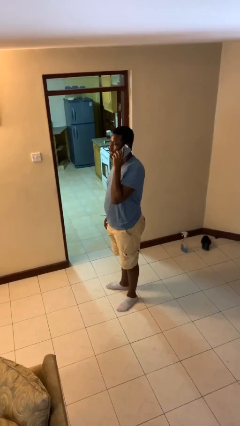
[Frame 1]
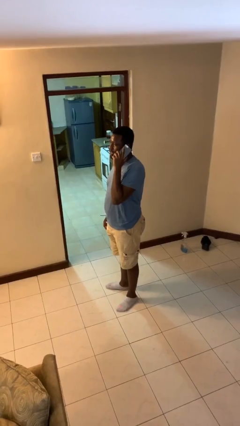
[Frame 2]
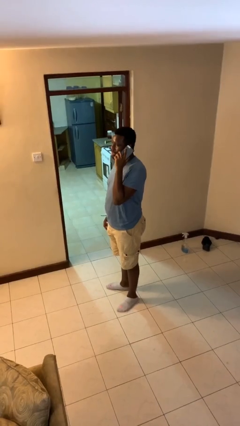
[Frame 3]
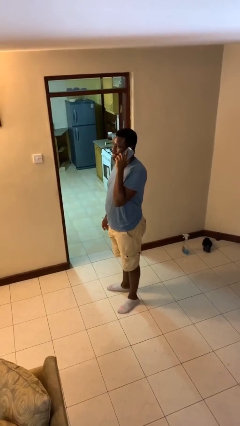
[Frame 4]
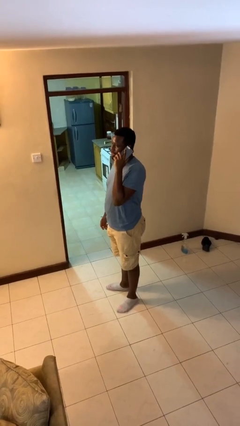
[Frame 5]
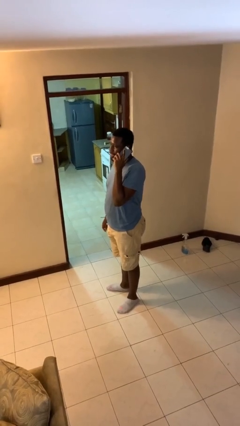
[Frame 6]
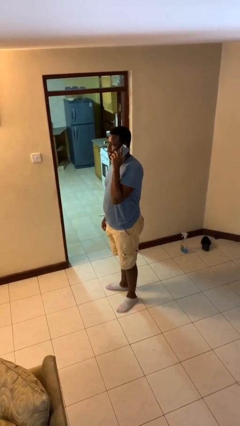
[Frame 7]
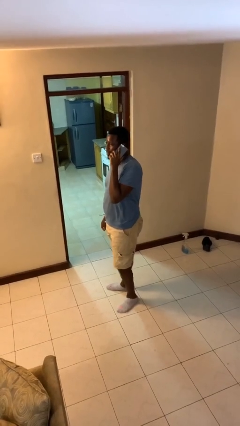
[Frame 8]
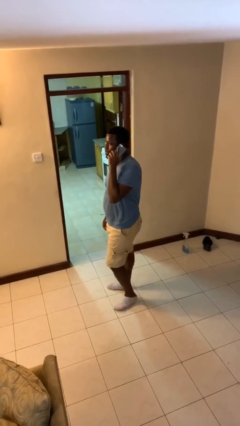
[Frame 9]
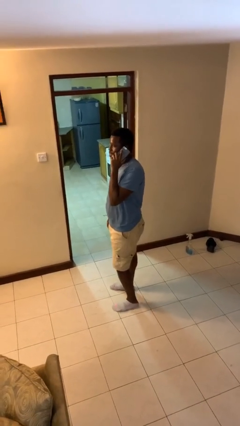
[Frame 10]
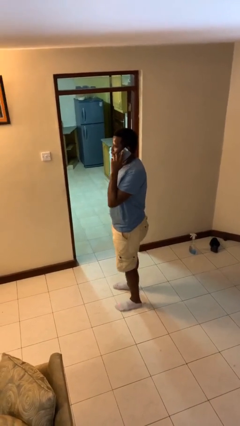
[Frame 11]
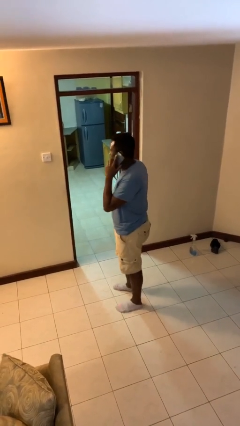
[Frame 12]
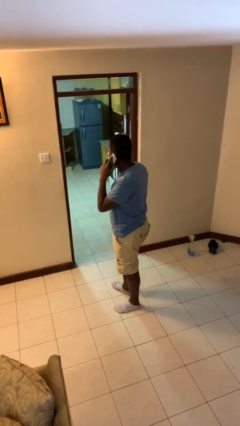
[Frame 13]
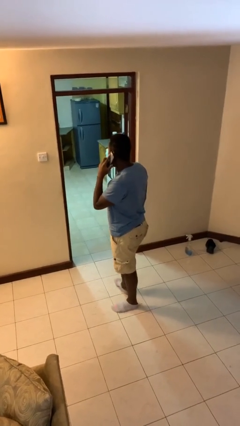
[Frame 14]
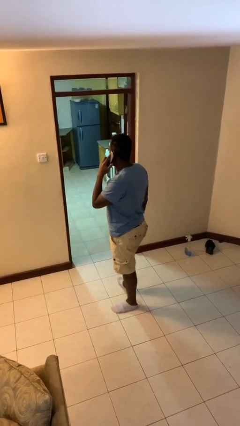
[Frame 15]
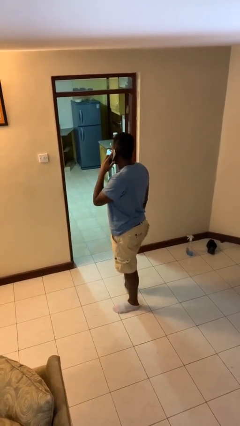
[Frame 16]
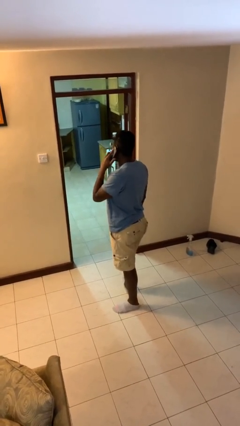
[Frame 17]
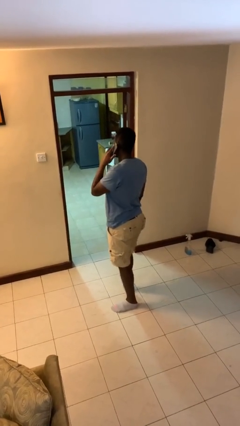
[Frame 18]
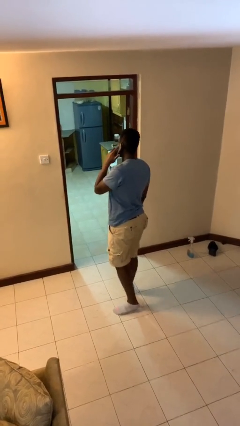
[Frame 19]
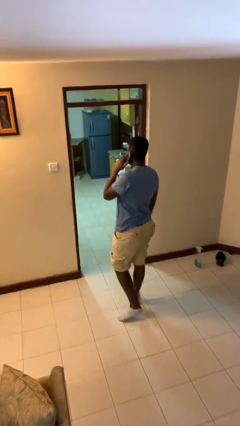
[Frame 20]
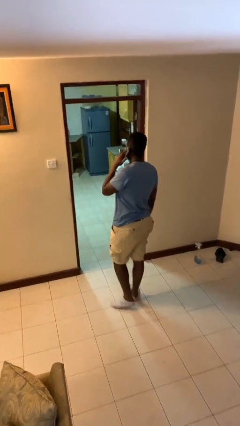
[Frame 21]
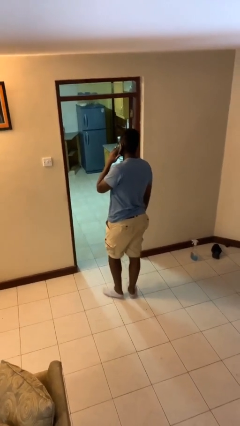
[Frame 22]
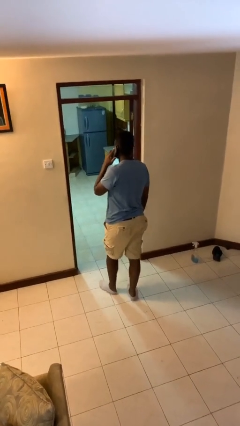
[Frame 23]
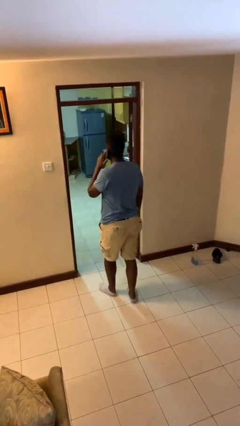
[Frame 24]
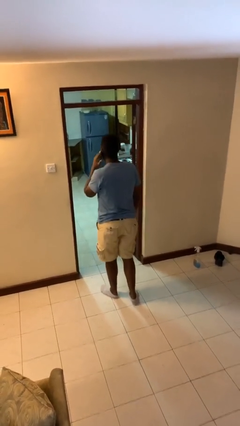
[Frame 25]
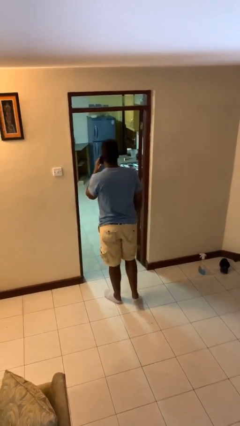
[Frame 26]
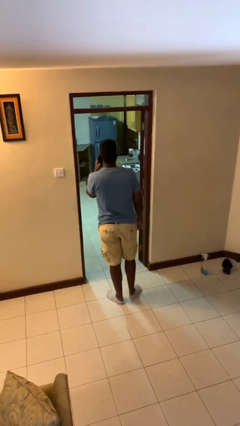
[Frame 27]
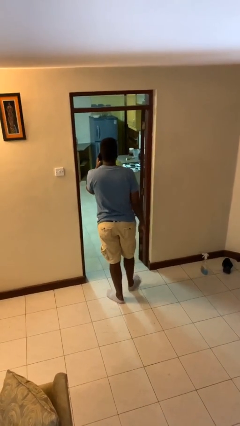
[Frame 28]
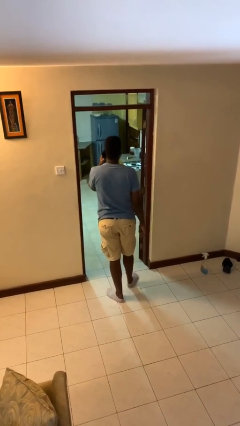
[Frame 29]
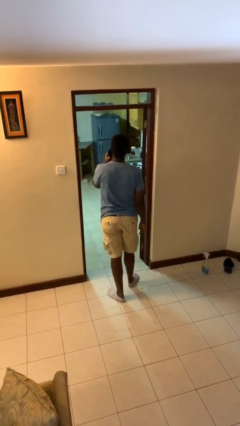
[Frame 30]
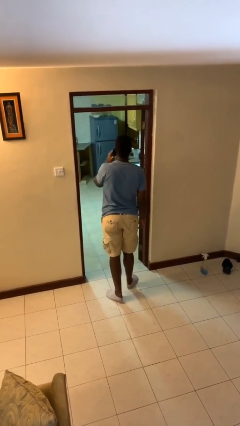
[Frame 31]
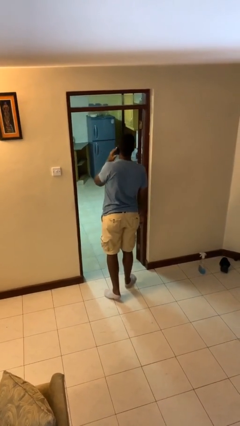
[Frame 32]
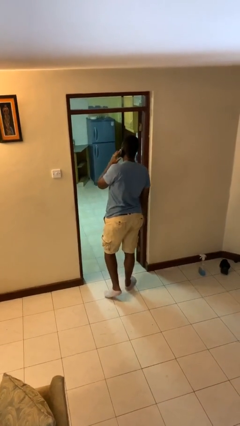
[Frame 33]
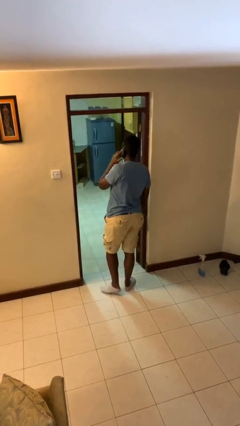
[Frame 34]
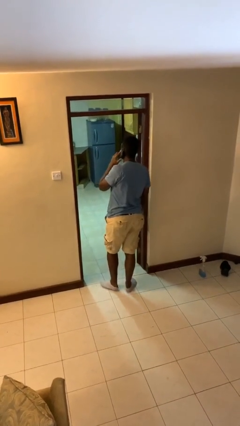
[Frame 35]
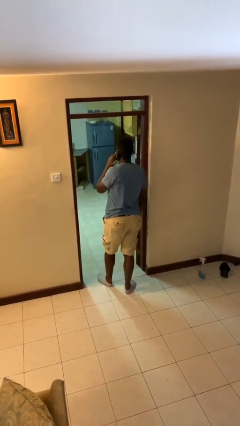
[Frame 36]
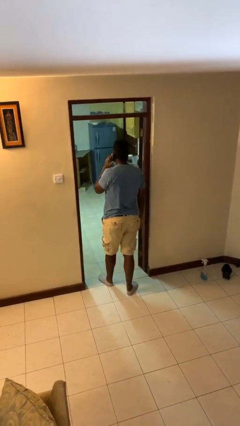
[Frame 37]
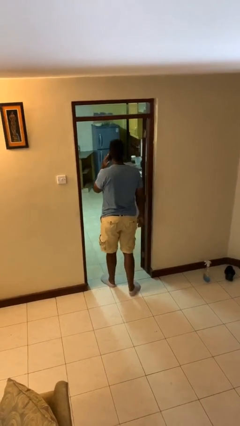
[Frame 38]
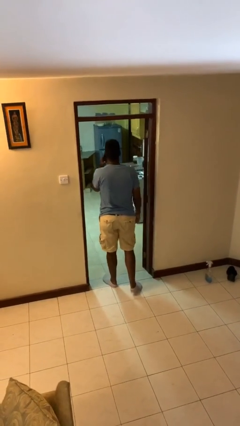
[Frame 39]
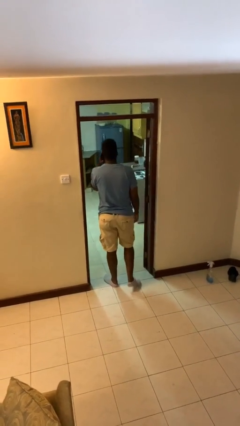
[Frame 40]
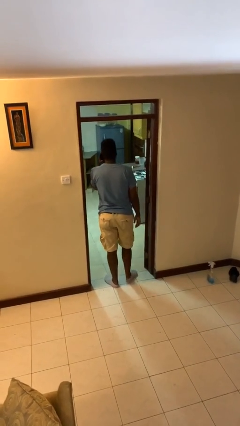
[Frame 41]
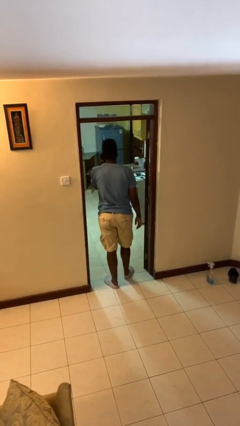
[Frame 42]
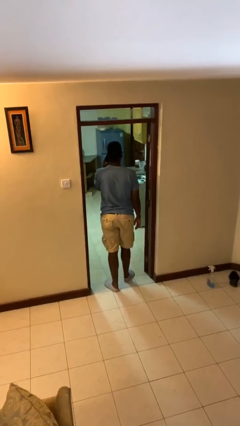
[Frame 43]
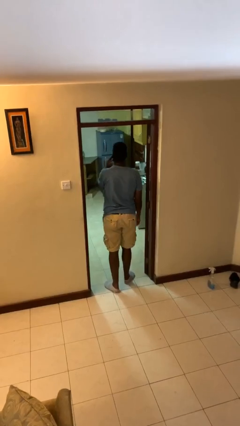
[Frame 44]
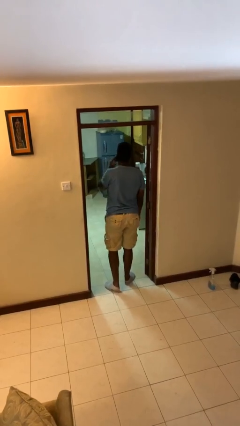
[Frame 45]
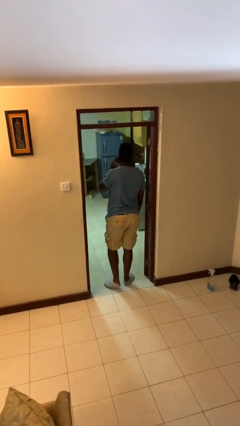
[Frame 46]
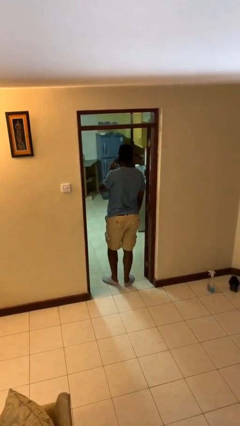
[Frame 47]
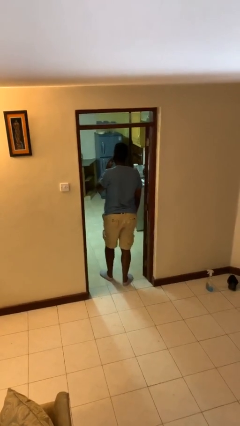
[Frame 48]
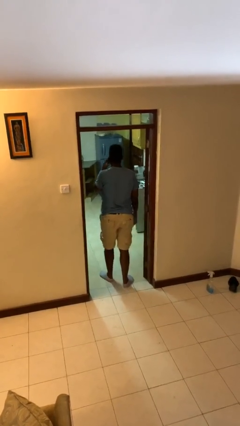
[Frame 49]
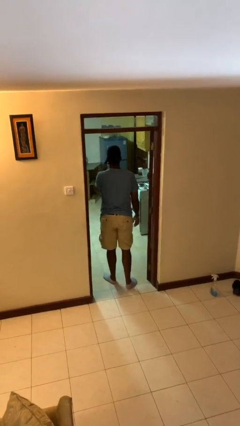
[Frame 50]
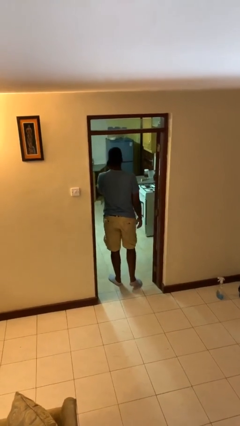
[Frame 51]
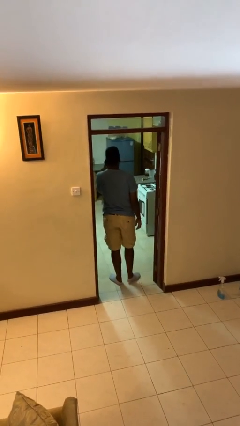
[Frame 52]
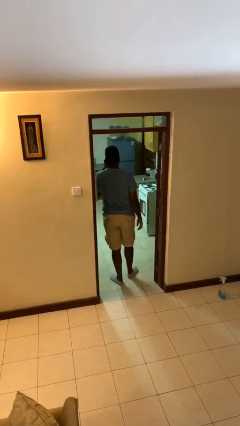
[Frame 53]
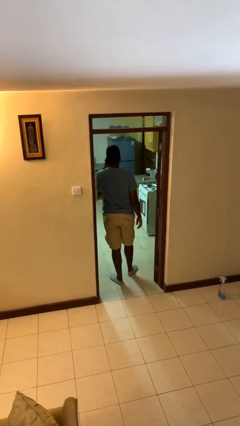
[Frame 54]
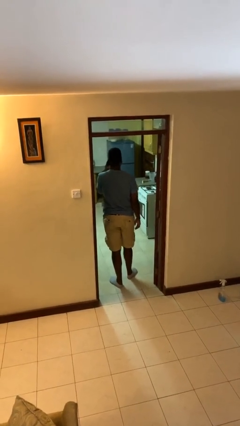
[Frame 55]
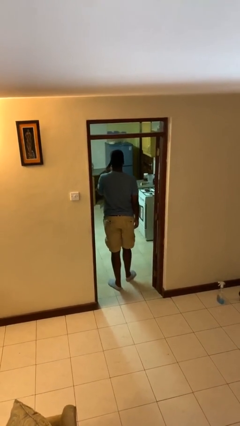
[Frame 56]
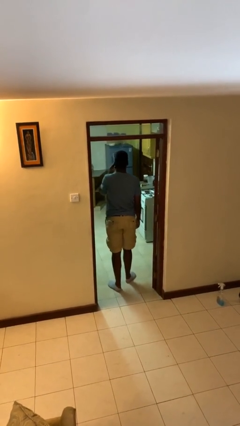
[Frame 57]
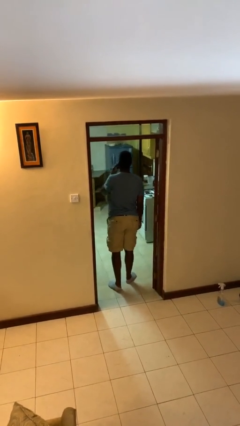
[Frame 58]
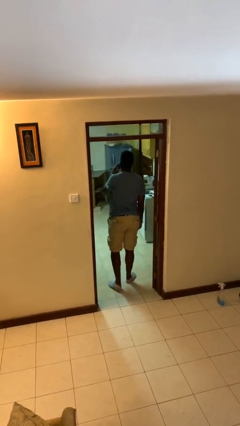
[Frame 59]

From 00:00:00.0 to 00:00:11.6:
person exits scene through structure

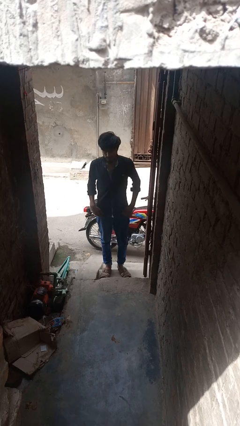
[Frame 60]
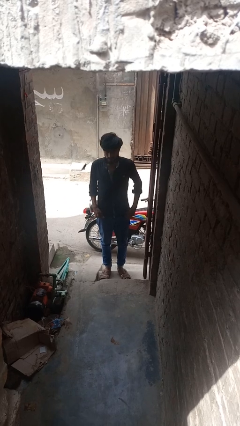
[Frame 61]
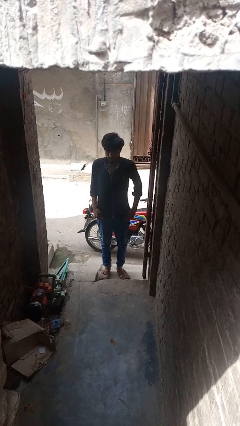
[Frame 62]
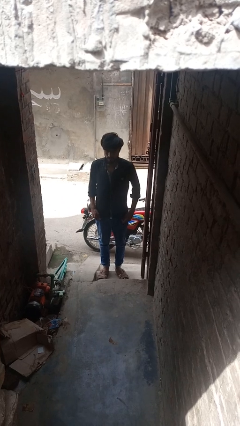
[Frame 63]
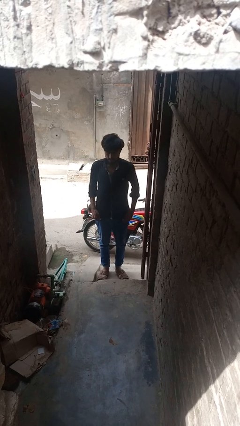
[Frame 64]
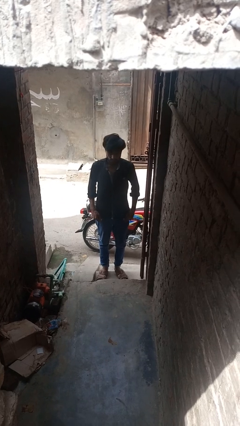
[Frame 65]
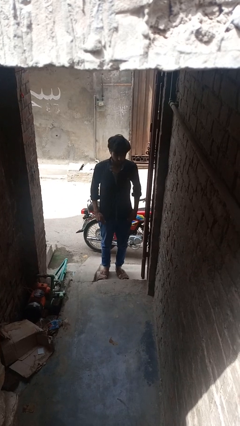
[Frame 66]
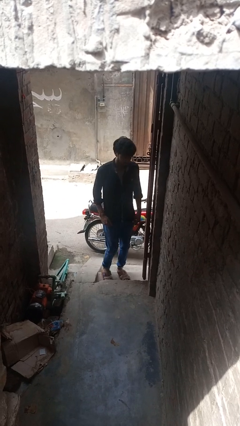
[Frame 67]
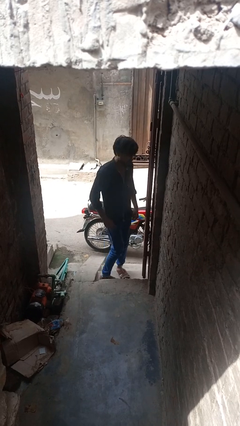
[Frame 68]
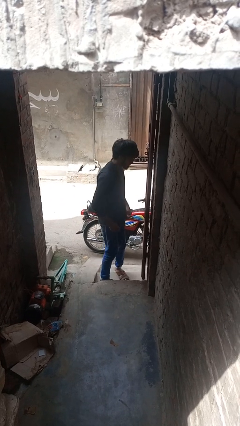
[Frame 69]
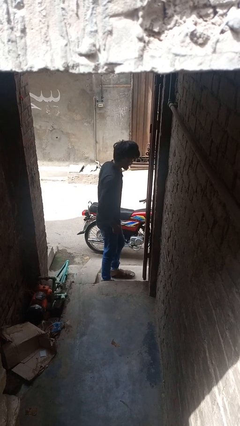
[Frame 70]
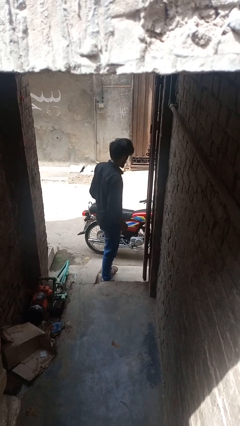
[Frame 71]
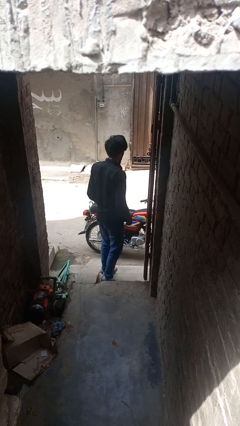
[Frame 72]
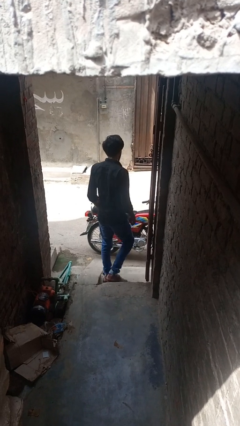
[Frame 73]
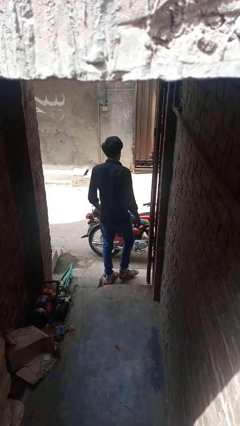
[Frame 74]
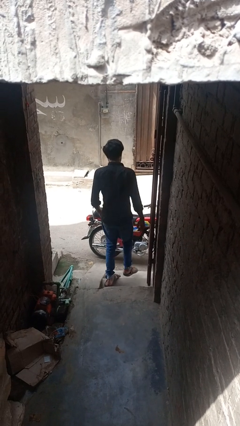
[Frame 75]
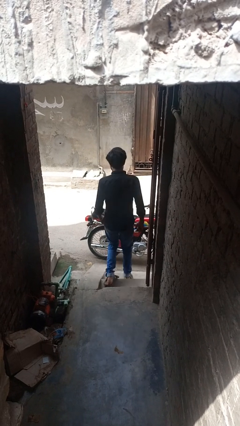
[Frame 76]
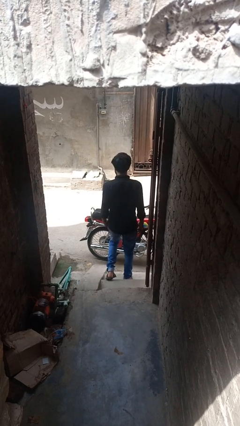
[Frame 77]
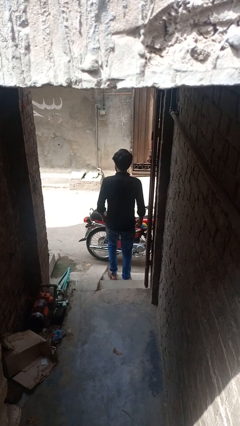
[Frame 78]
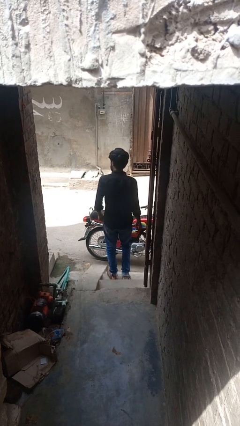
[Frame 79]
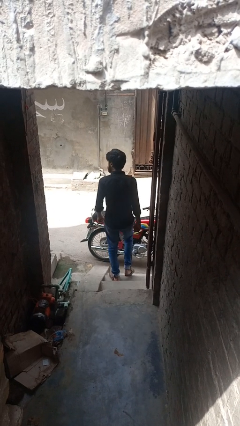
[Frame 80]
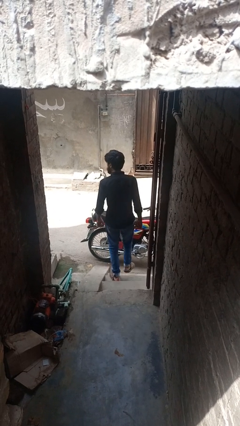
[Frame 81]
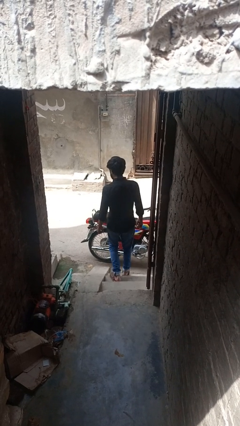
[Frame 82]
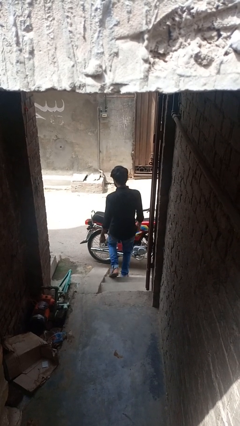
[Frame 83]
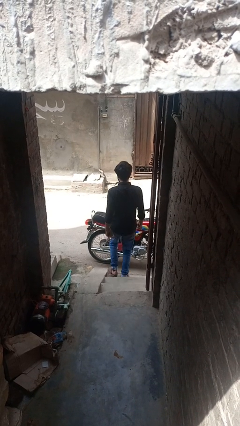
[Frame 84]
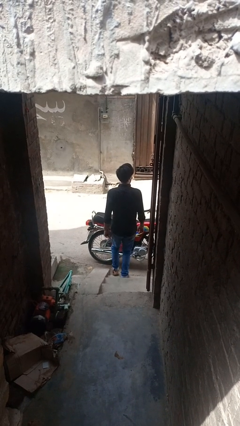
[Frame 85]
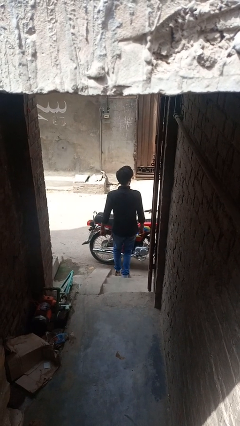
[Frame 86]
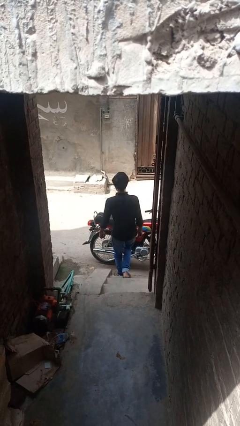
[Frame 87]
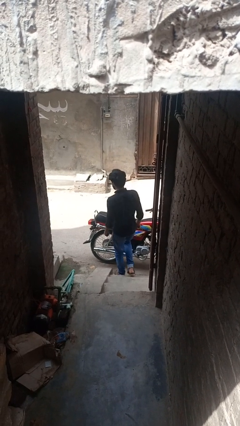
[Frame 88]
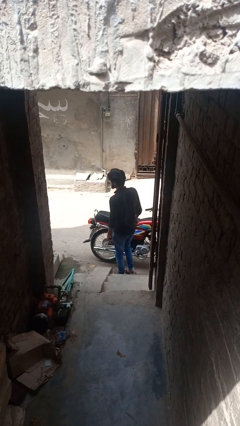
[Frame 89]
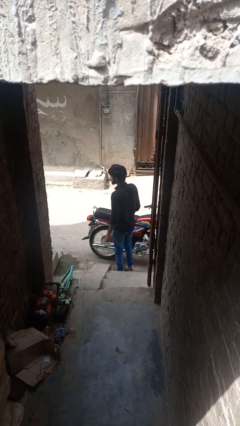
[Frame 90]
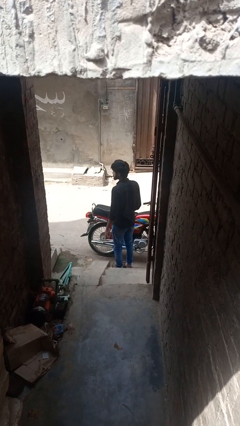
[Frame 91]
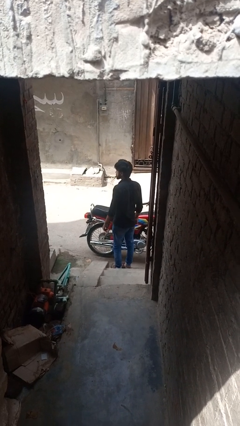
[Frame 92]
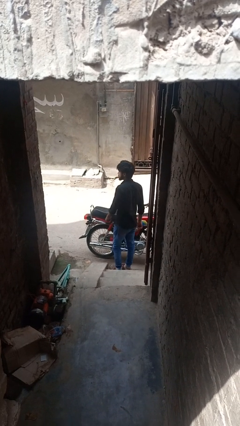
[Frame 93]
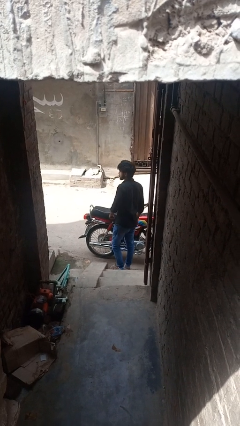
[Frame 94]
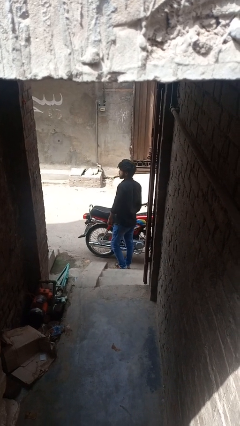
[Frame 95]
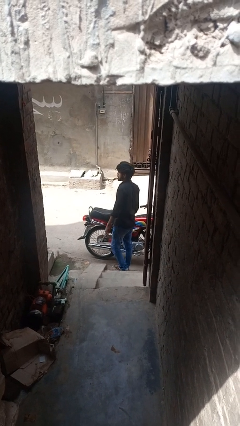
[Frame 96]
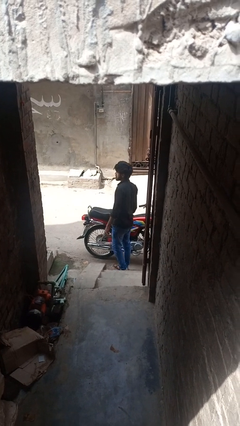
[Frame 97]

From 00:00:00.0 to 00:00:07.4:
person climbs down stairs
